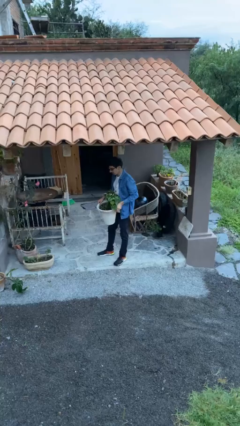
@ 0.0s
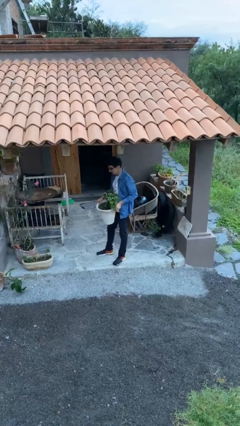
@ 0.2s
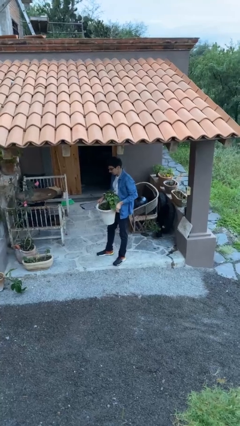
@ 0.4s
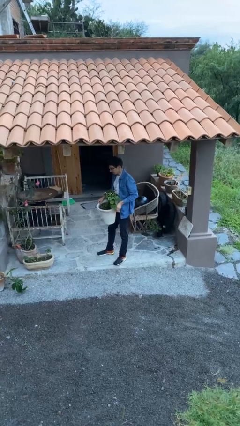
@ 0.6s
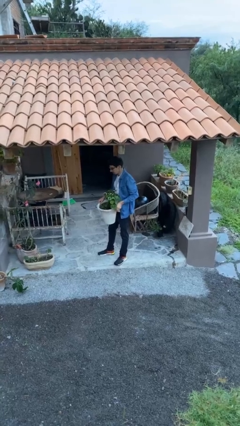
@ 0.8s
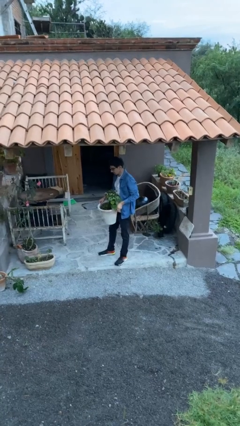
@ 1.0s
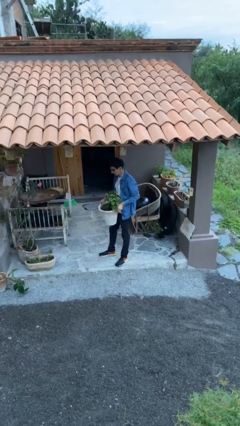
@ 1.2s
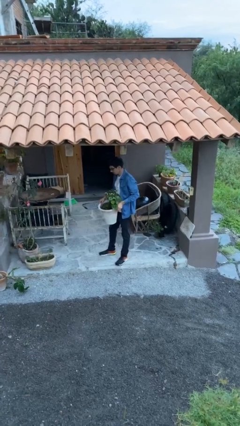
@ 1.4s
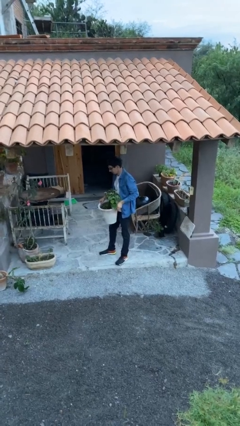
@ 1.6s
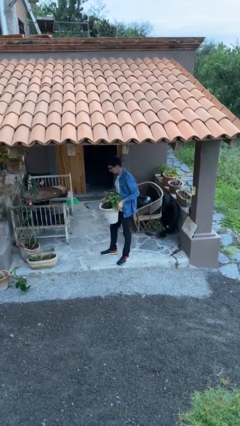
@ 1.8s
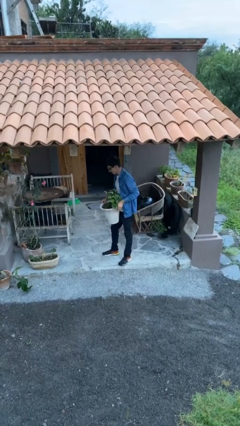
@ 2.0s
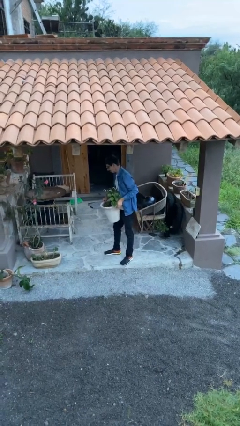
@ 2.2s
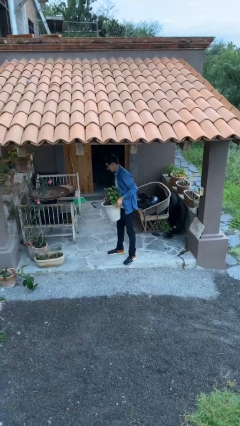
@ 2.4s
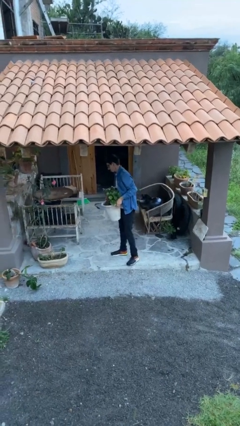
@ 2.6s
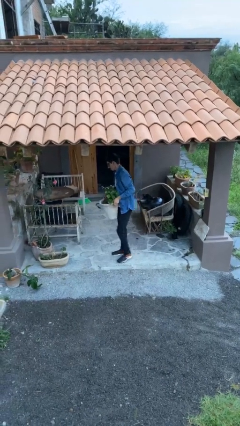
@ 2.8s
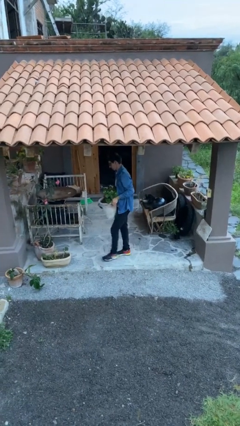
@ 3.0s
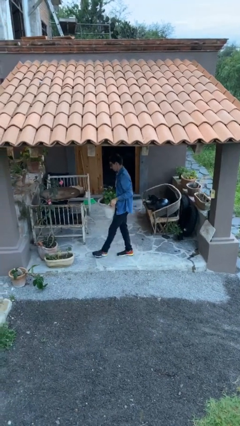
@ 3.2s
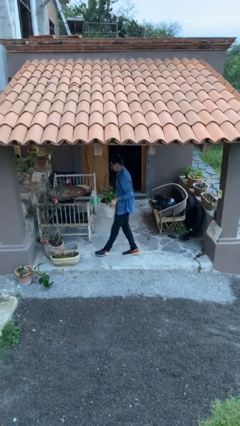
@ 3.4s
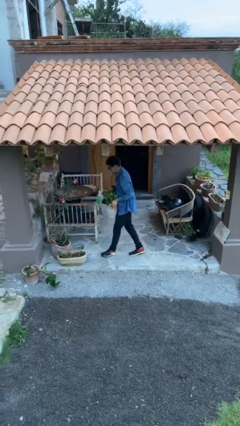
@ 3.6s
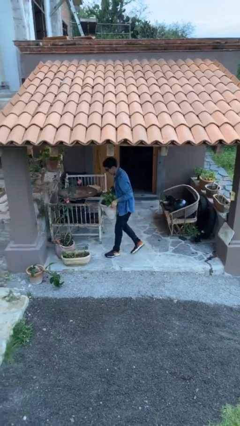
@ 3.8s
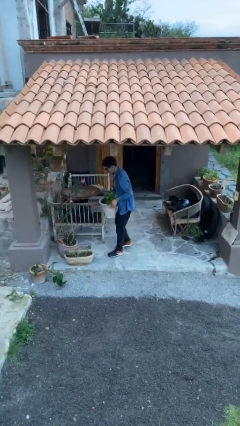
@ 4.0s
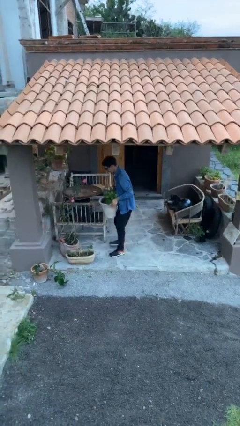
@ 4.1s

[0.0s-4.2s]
person carries heavy object

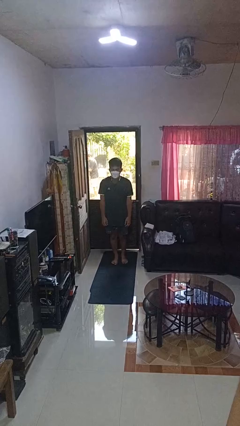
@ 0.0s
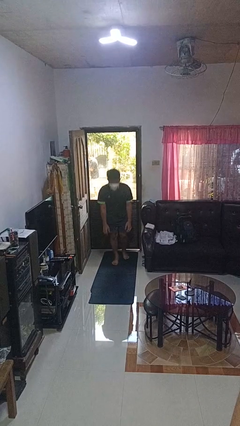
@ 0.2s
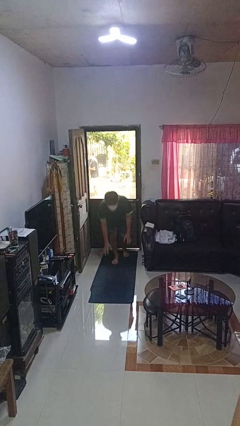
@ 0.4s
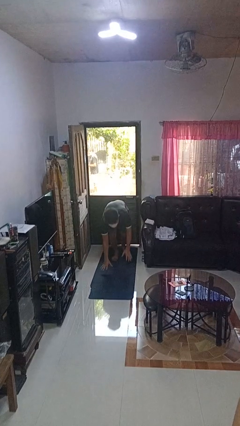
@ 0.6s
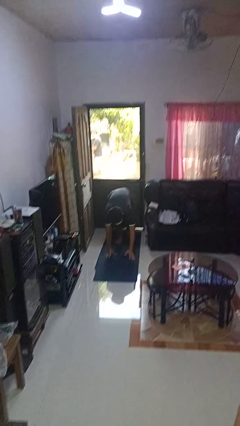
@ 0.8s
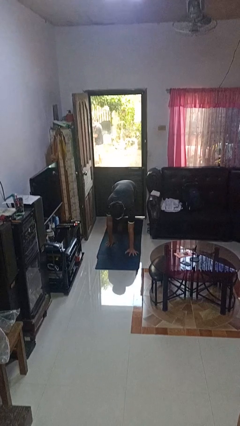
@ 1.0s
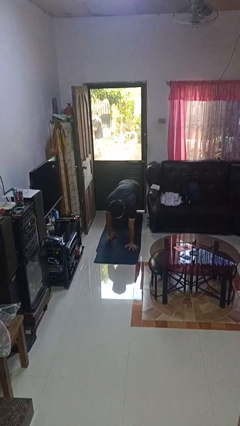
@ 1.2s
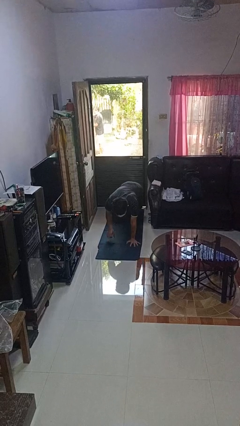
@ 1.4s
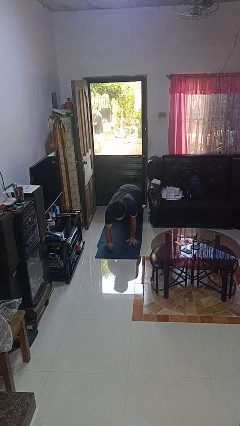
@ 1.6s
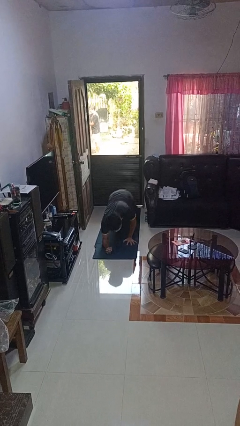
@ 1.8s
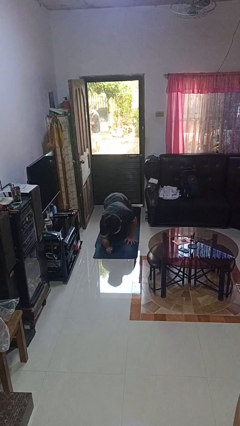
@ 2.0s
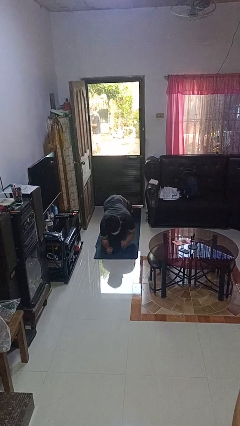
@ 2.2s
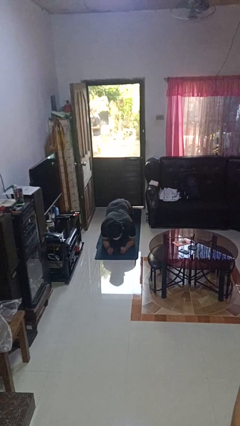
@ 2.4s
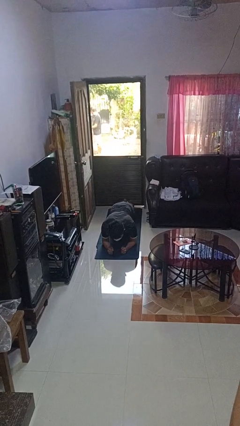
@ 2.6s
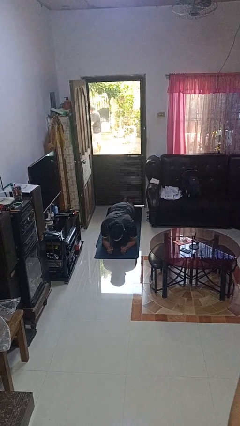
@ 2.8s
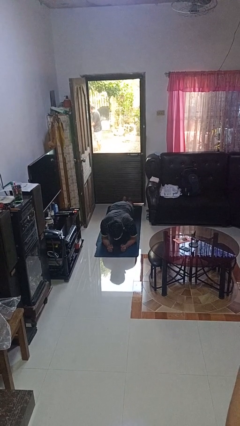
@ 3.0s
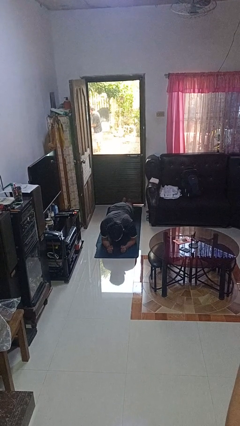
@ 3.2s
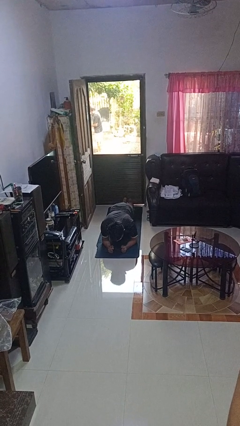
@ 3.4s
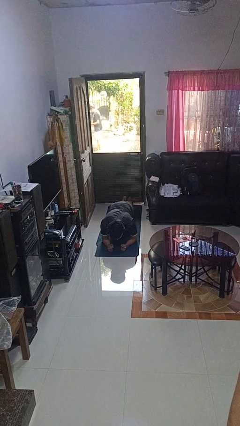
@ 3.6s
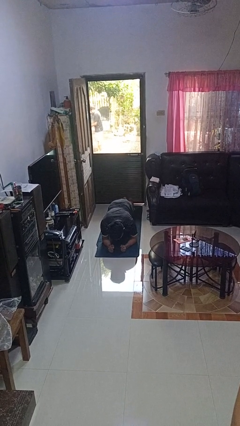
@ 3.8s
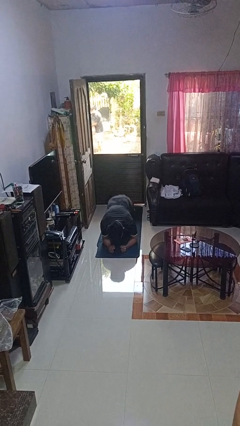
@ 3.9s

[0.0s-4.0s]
person exercises with plank

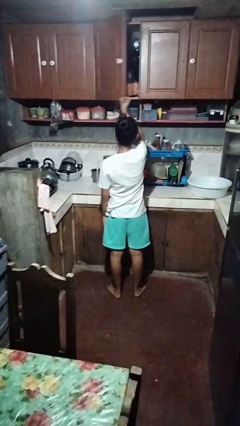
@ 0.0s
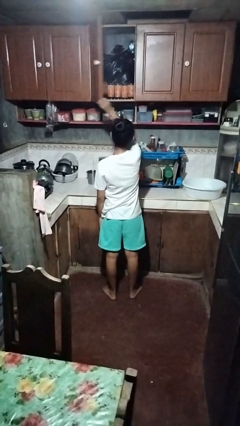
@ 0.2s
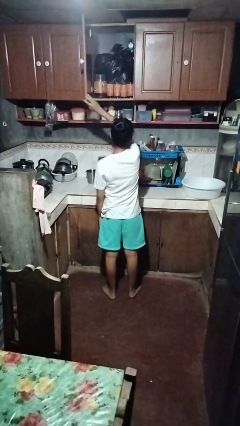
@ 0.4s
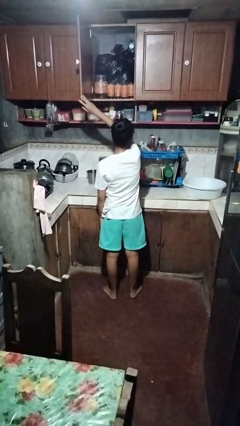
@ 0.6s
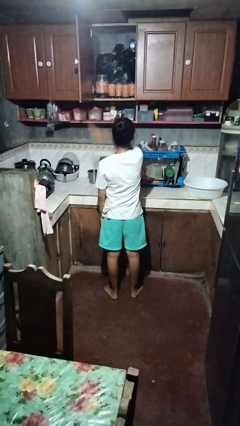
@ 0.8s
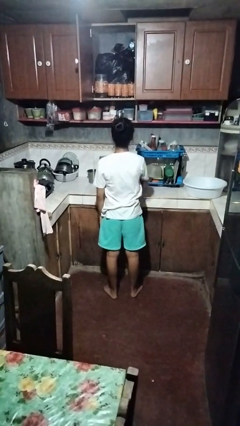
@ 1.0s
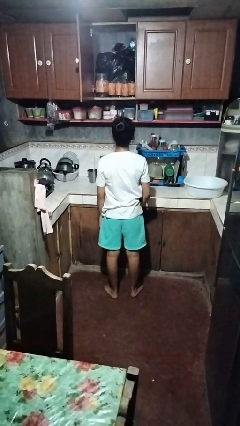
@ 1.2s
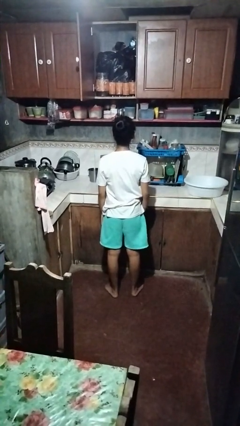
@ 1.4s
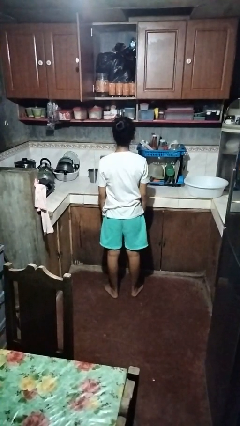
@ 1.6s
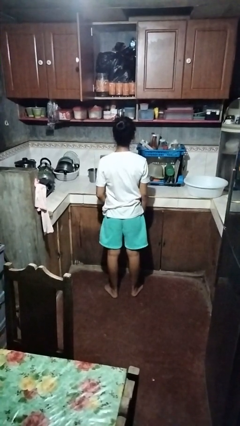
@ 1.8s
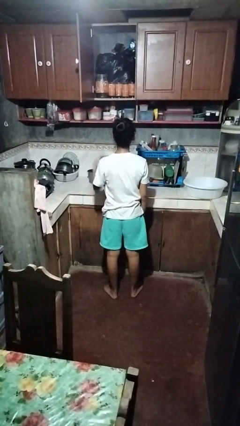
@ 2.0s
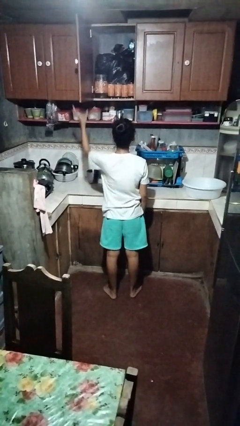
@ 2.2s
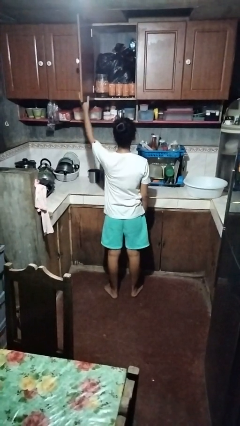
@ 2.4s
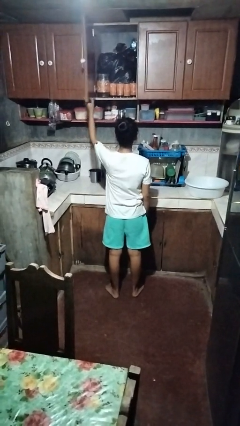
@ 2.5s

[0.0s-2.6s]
person opens cabinet

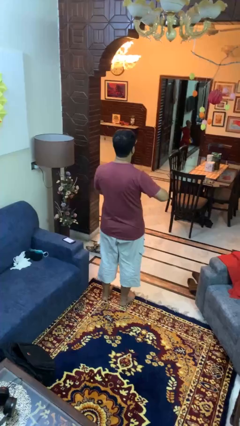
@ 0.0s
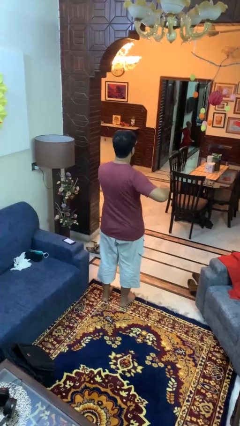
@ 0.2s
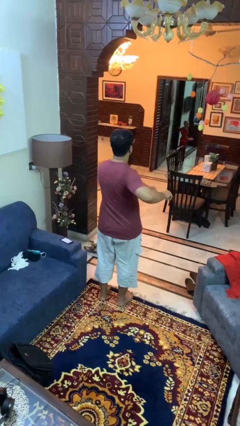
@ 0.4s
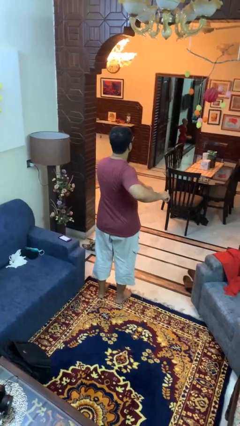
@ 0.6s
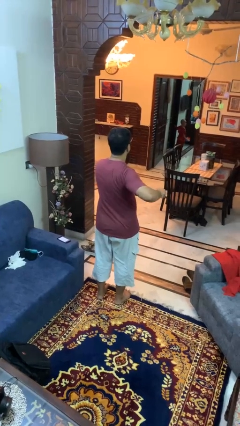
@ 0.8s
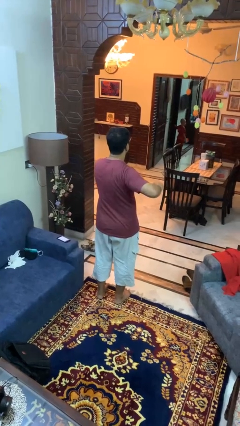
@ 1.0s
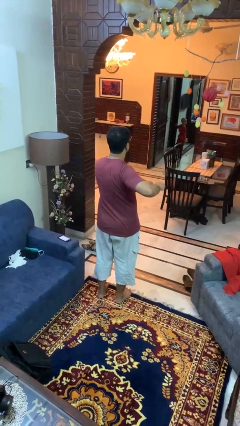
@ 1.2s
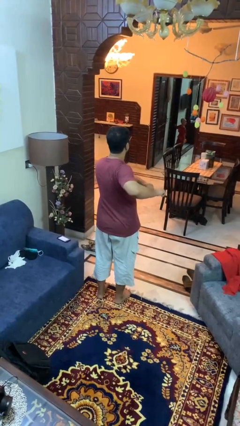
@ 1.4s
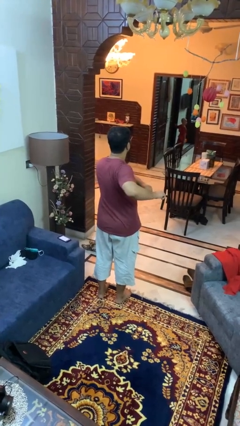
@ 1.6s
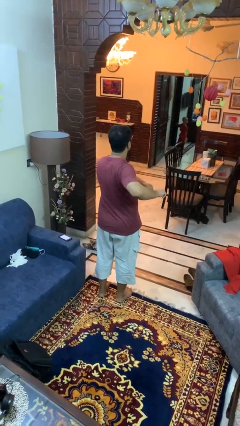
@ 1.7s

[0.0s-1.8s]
person stretches arms to side

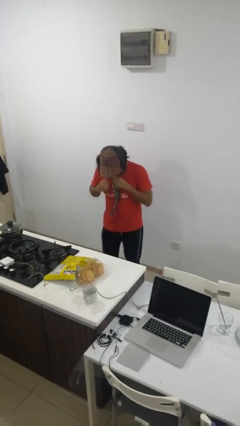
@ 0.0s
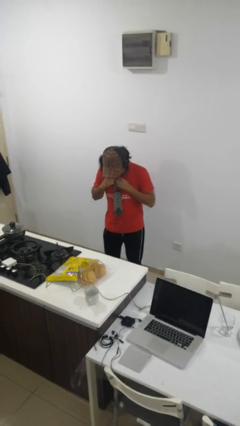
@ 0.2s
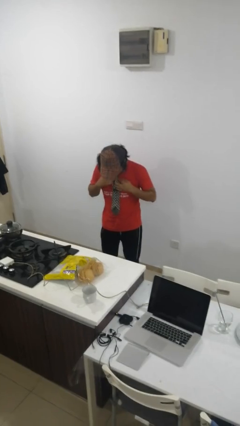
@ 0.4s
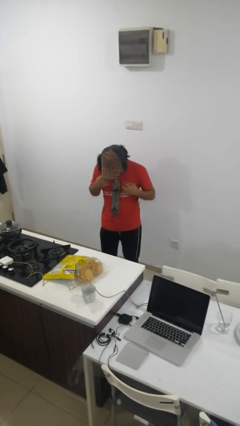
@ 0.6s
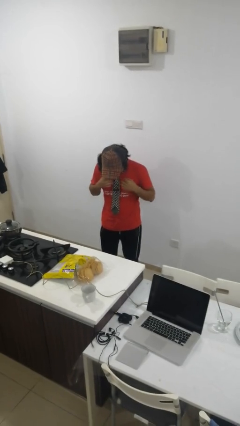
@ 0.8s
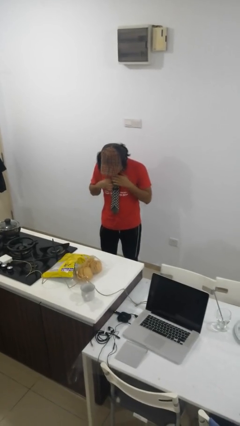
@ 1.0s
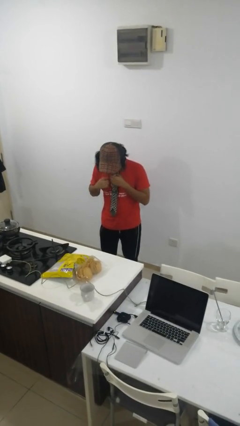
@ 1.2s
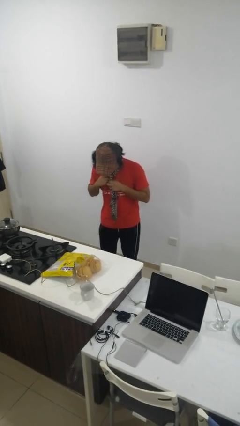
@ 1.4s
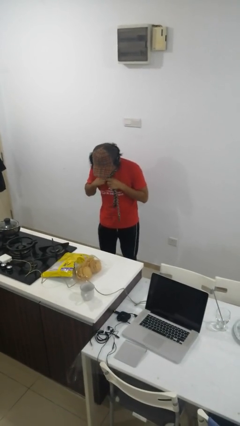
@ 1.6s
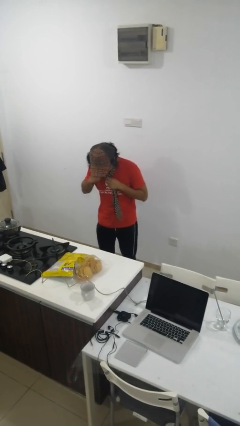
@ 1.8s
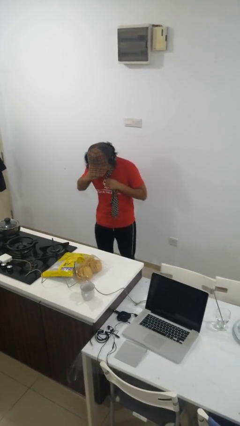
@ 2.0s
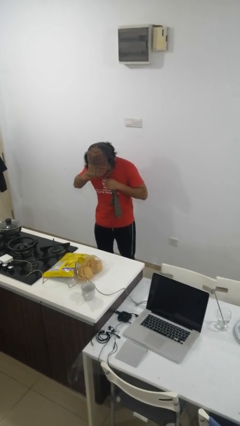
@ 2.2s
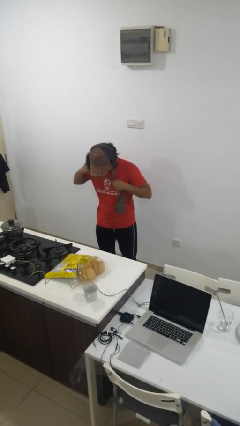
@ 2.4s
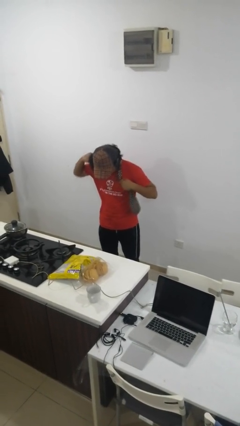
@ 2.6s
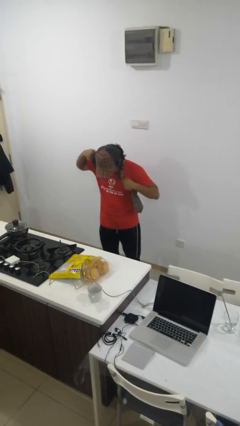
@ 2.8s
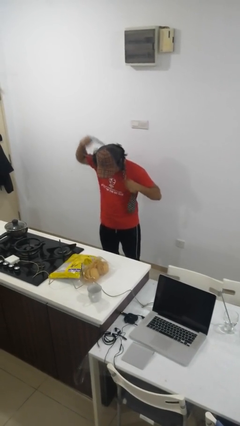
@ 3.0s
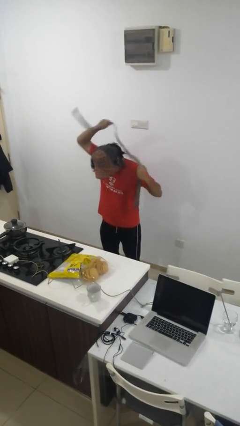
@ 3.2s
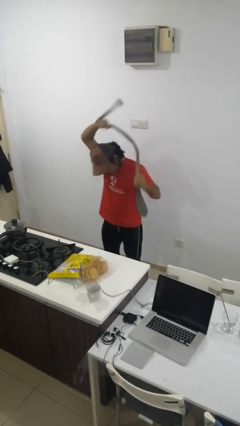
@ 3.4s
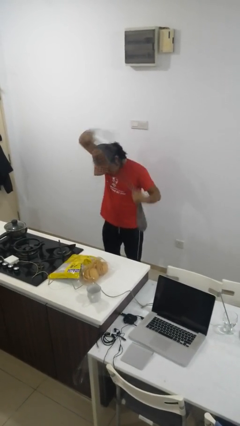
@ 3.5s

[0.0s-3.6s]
person takes off necktie

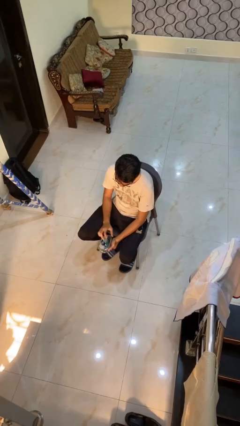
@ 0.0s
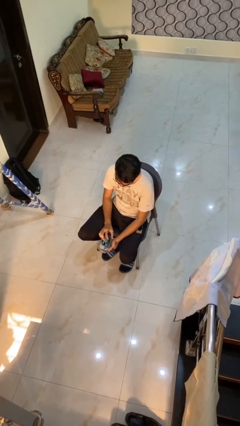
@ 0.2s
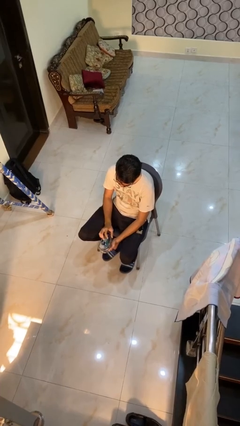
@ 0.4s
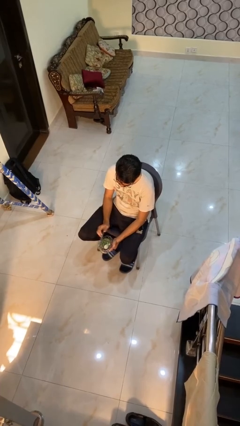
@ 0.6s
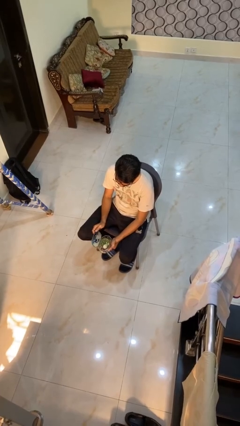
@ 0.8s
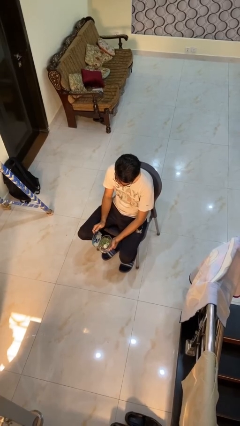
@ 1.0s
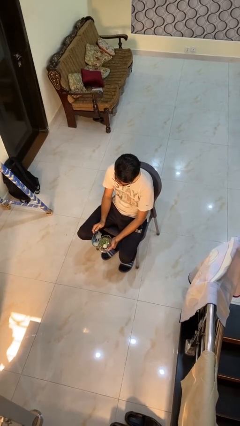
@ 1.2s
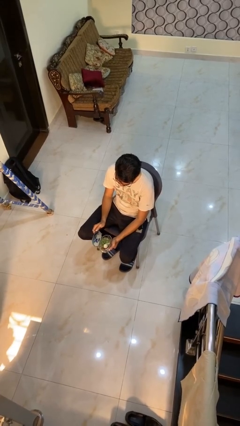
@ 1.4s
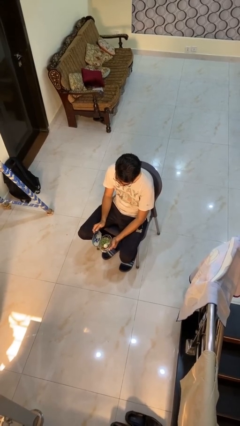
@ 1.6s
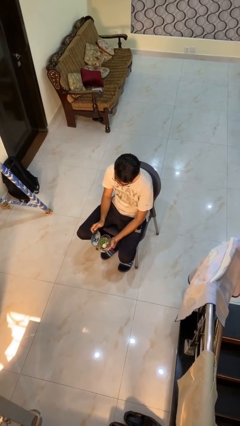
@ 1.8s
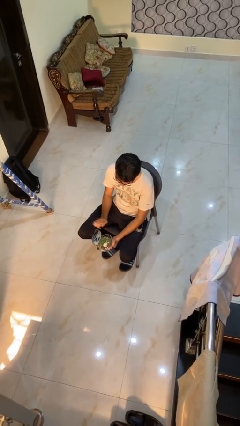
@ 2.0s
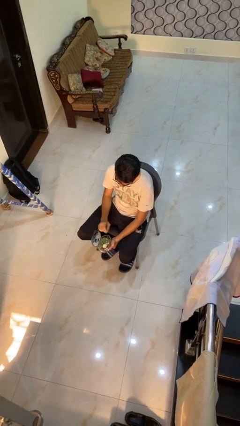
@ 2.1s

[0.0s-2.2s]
person opens jewelry box
